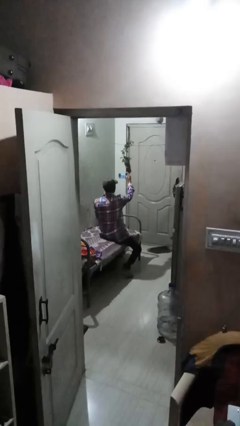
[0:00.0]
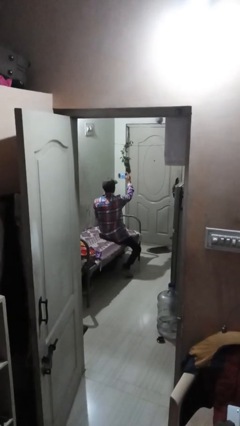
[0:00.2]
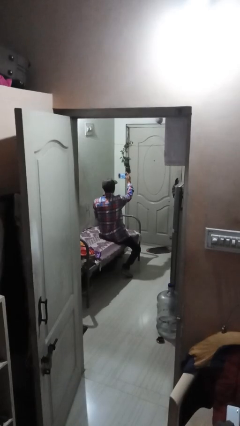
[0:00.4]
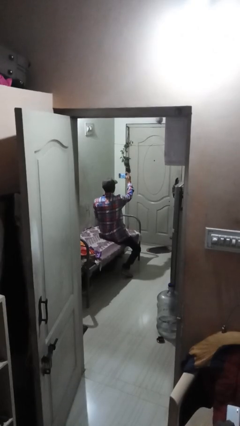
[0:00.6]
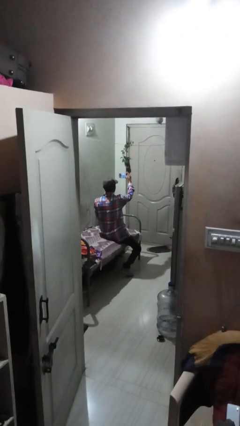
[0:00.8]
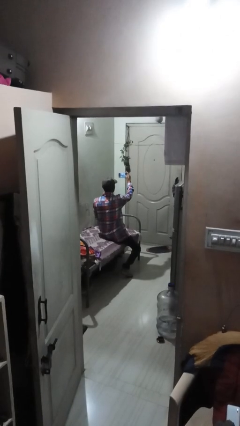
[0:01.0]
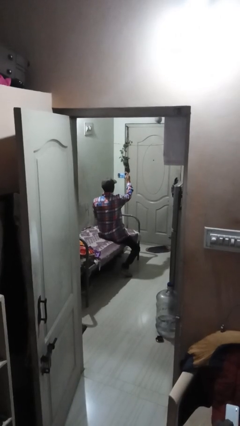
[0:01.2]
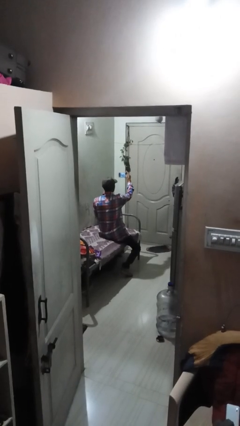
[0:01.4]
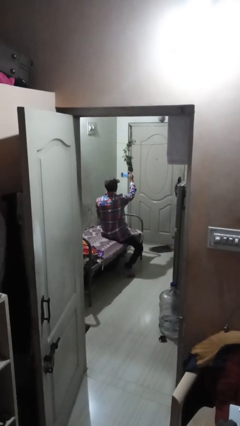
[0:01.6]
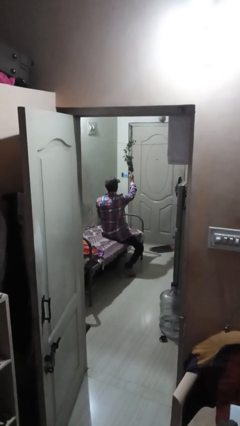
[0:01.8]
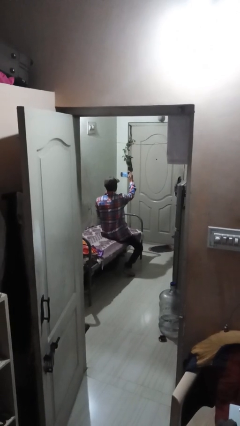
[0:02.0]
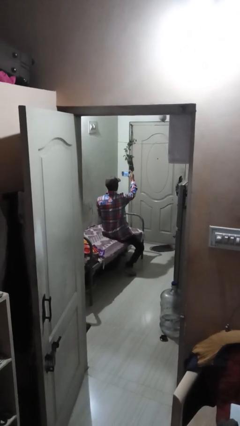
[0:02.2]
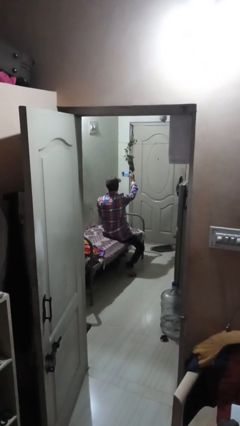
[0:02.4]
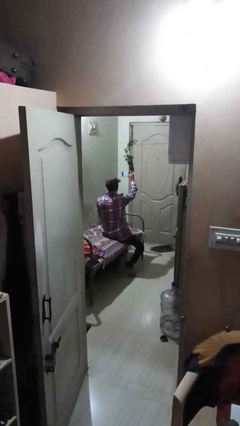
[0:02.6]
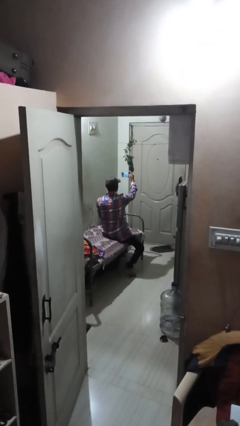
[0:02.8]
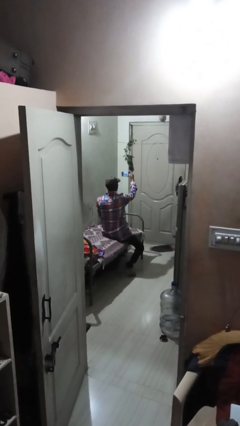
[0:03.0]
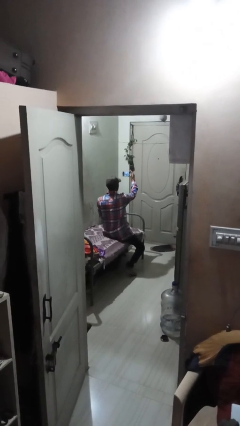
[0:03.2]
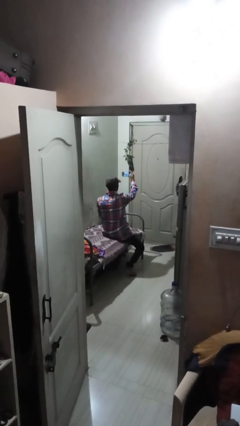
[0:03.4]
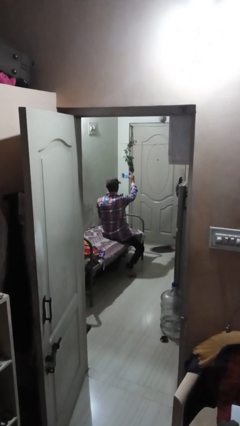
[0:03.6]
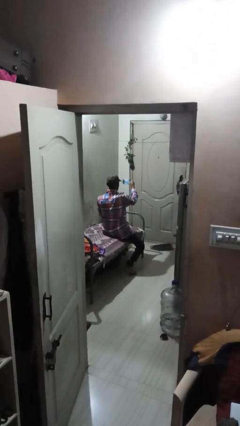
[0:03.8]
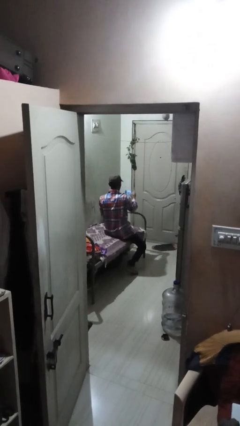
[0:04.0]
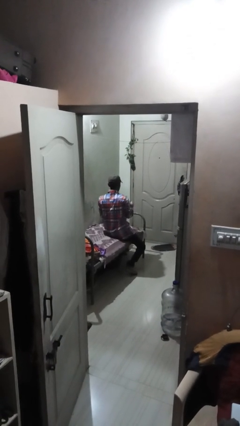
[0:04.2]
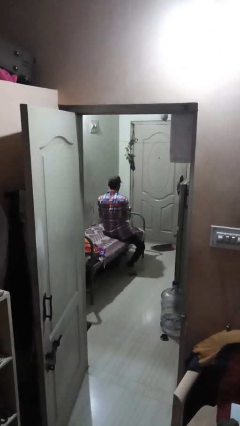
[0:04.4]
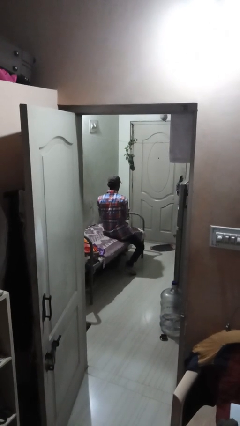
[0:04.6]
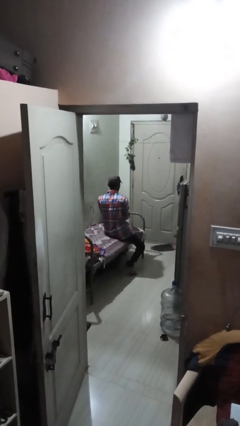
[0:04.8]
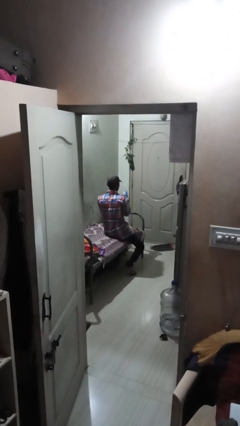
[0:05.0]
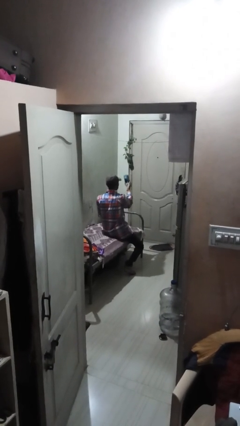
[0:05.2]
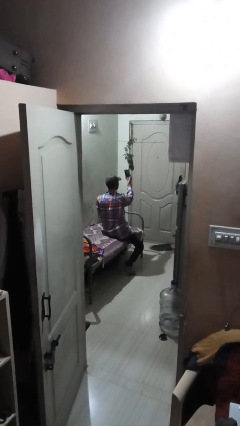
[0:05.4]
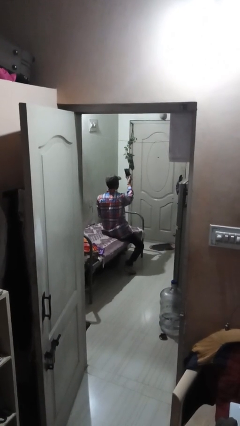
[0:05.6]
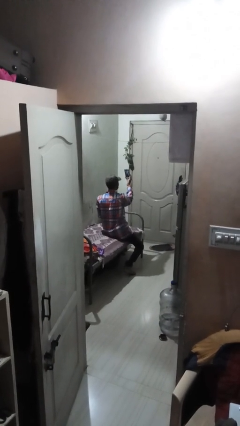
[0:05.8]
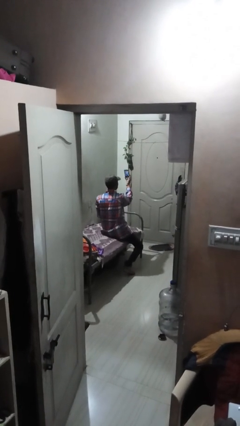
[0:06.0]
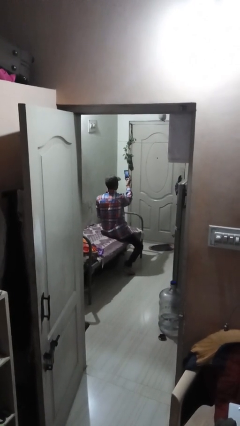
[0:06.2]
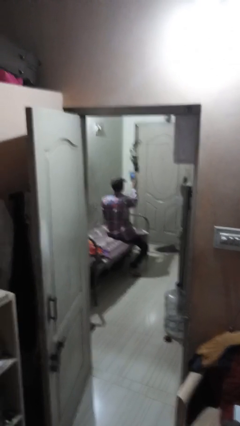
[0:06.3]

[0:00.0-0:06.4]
person takes selfie

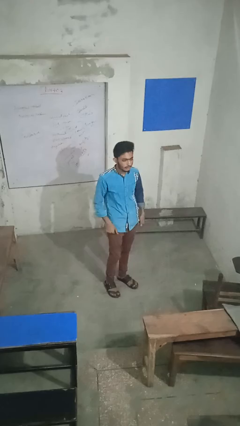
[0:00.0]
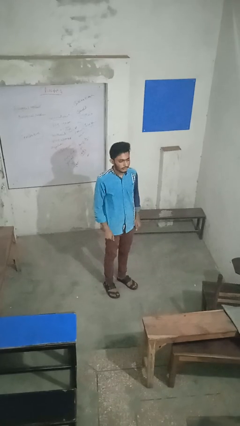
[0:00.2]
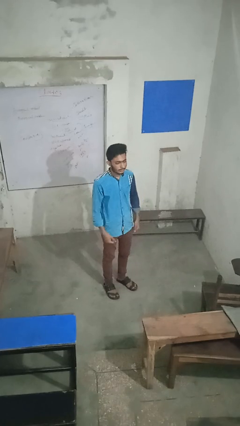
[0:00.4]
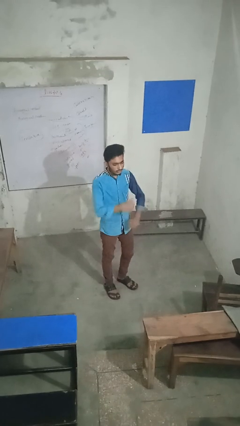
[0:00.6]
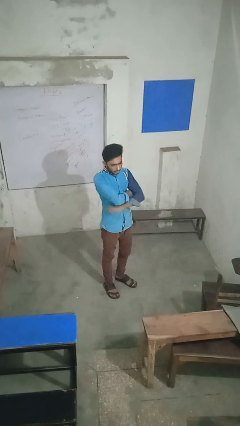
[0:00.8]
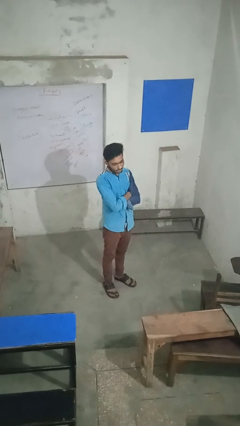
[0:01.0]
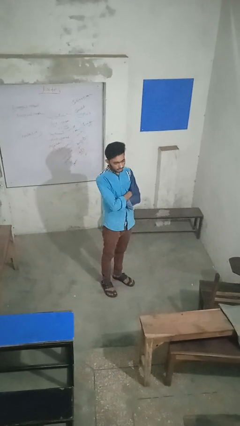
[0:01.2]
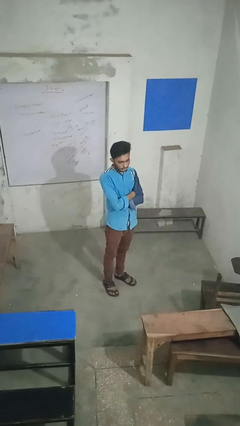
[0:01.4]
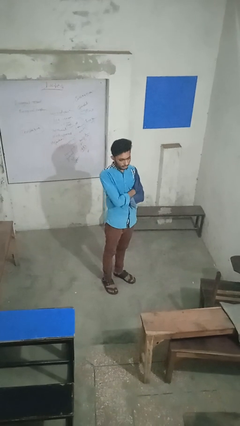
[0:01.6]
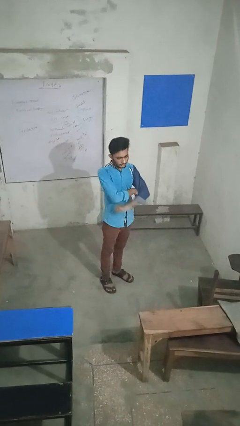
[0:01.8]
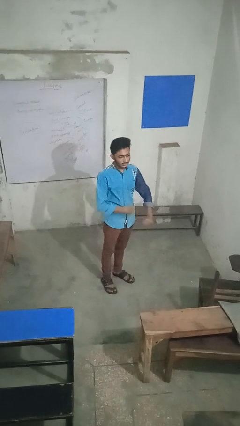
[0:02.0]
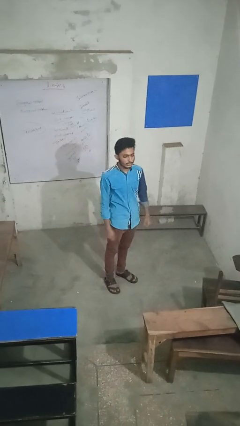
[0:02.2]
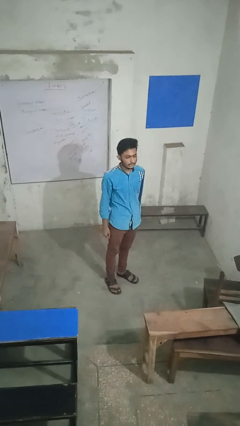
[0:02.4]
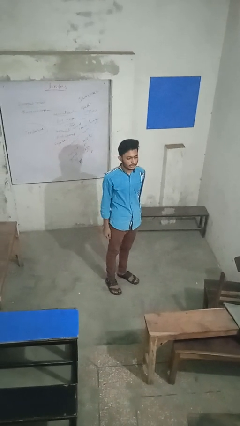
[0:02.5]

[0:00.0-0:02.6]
person crosses arms

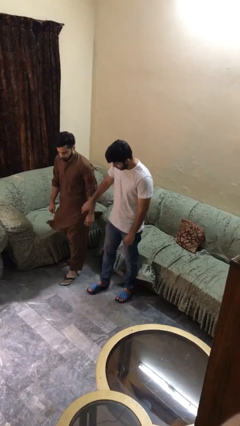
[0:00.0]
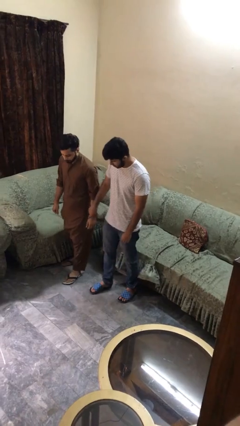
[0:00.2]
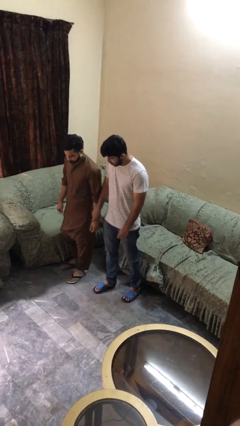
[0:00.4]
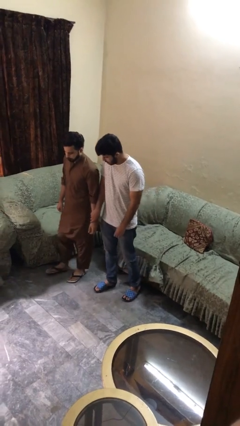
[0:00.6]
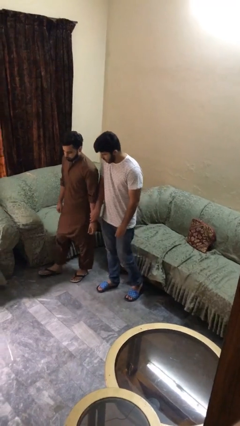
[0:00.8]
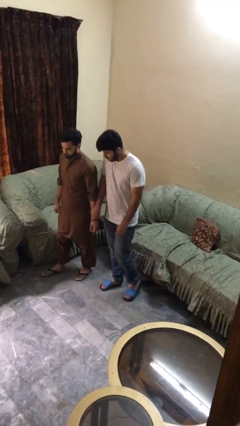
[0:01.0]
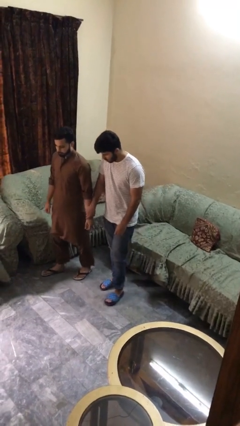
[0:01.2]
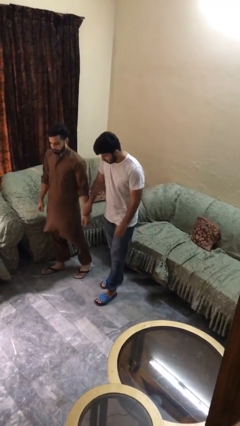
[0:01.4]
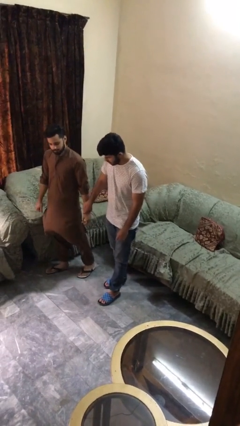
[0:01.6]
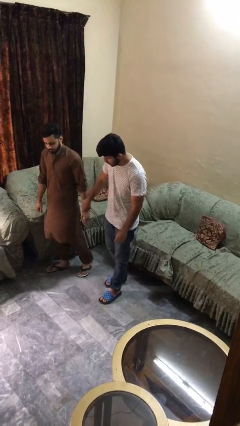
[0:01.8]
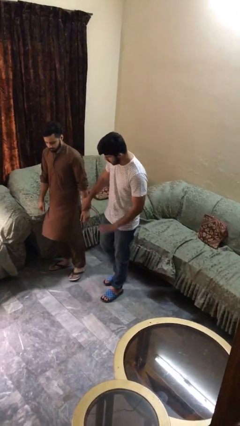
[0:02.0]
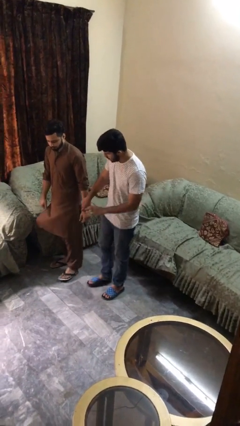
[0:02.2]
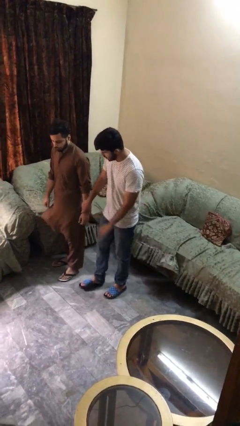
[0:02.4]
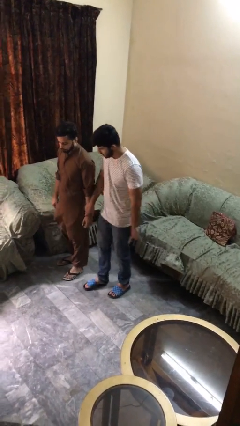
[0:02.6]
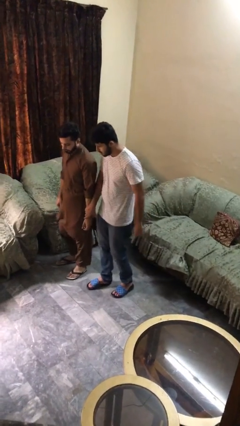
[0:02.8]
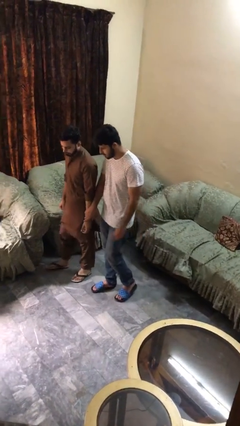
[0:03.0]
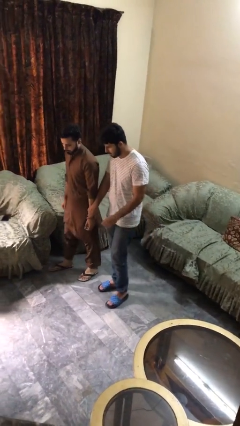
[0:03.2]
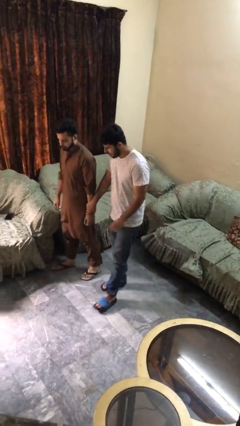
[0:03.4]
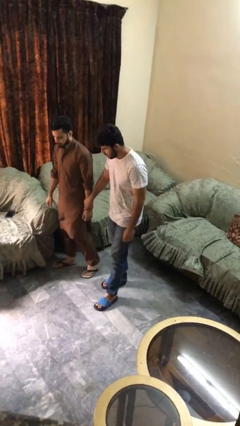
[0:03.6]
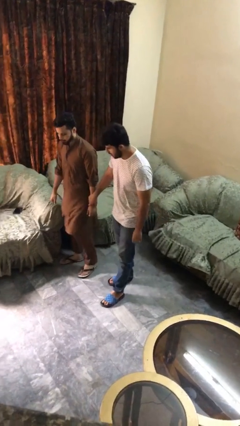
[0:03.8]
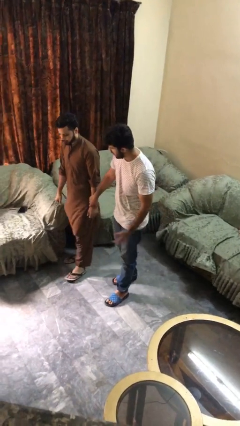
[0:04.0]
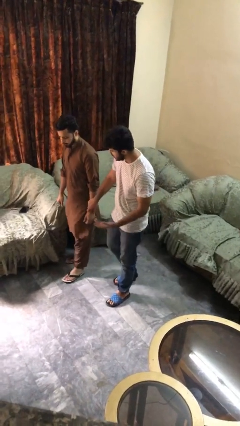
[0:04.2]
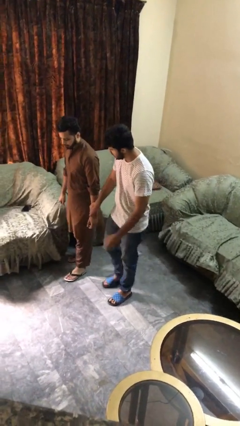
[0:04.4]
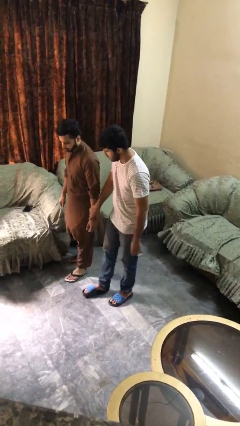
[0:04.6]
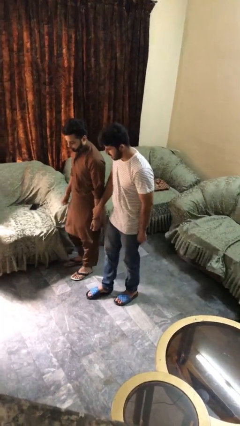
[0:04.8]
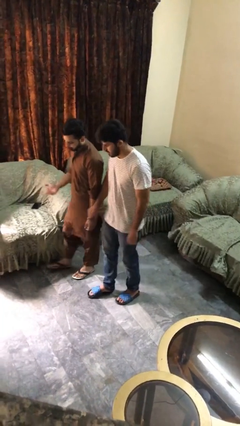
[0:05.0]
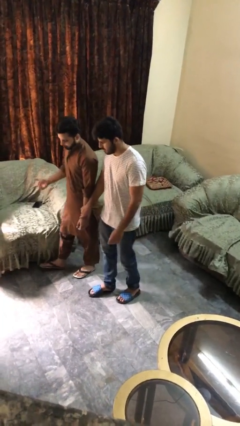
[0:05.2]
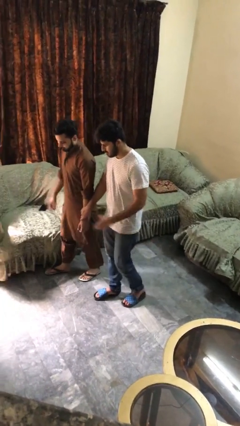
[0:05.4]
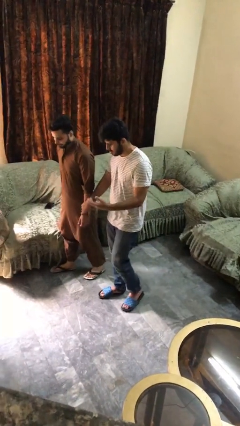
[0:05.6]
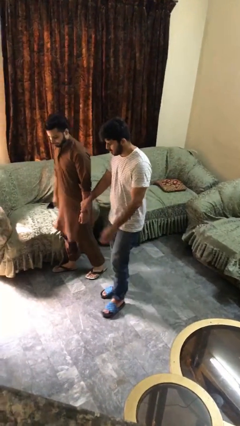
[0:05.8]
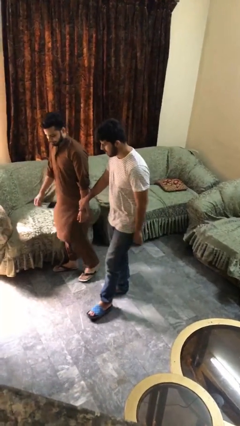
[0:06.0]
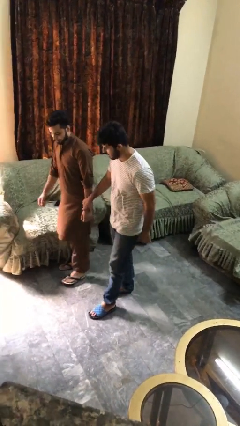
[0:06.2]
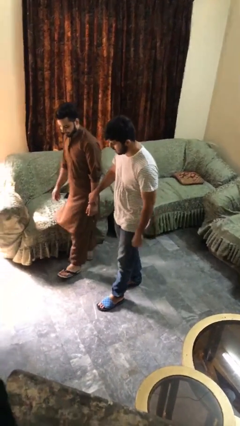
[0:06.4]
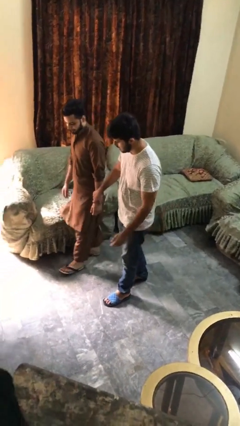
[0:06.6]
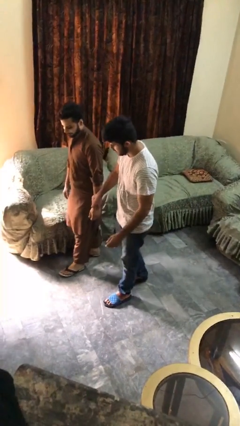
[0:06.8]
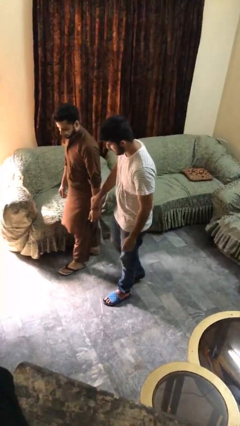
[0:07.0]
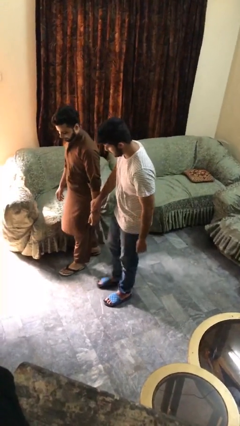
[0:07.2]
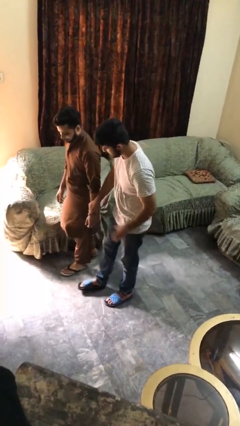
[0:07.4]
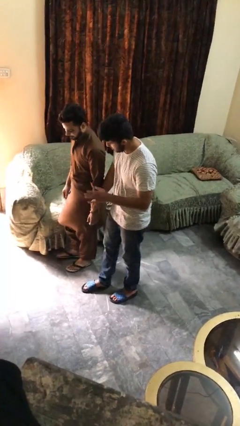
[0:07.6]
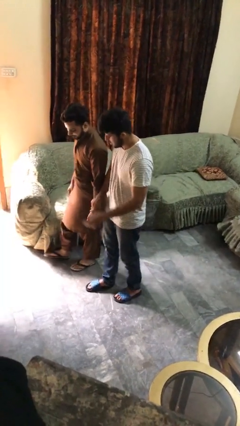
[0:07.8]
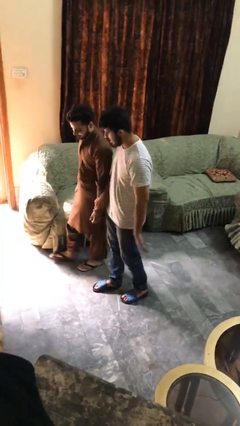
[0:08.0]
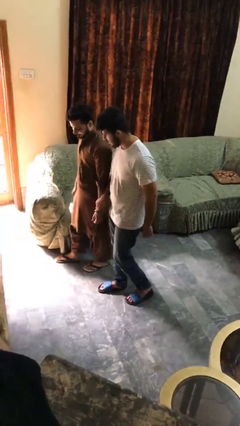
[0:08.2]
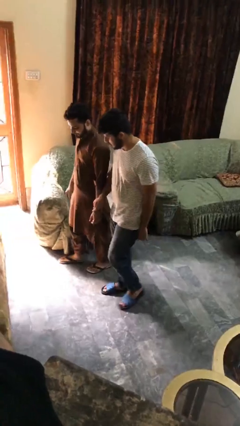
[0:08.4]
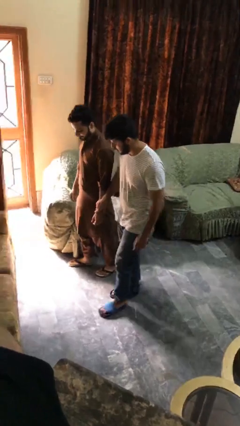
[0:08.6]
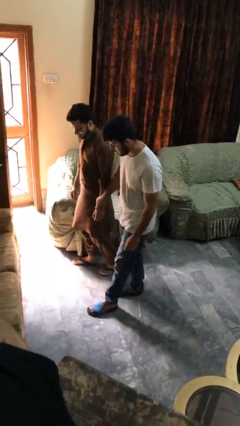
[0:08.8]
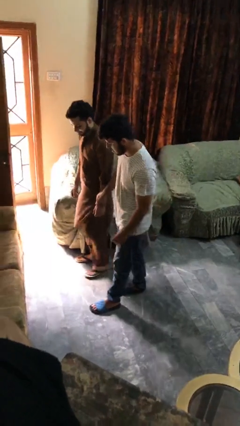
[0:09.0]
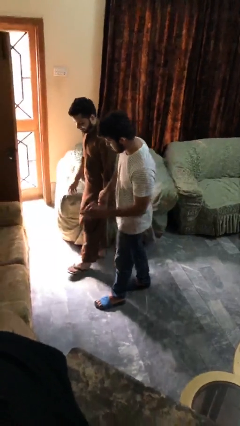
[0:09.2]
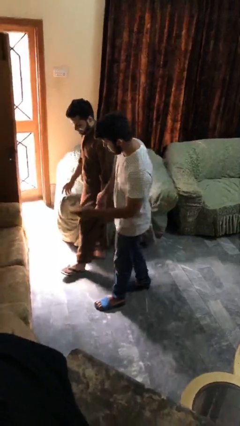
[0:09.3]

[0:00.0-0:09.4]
person holds hand
